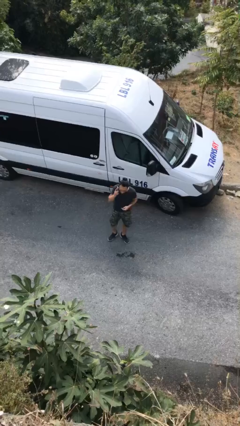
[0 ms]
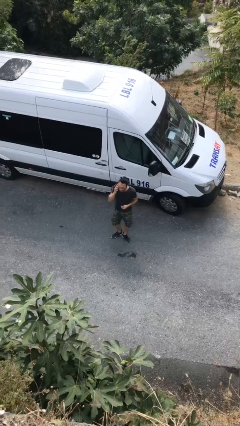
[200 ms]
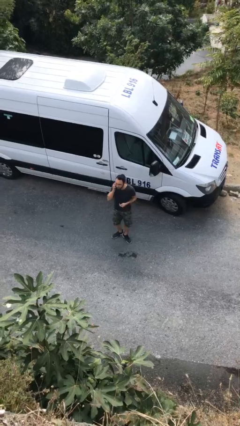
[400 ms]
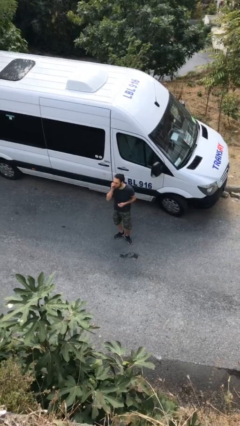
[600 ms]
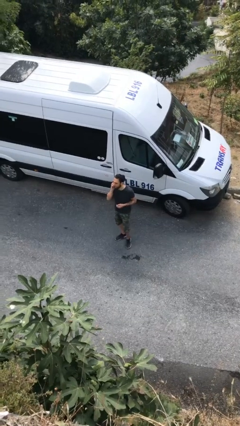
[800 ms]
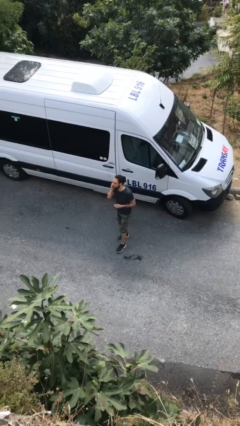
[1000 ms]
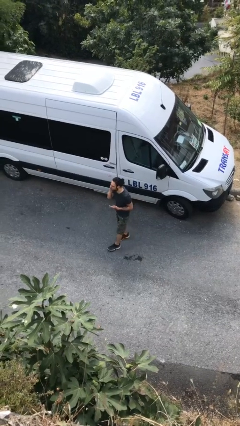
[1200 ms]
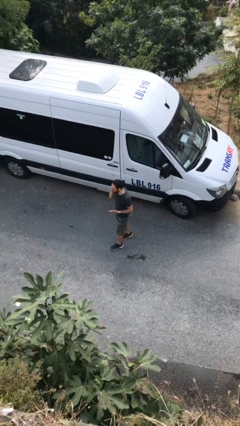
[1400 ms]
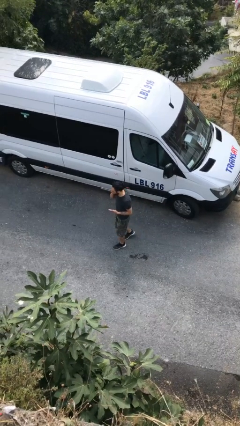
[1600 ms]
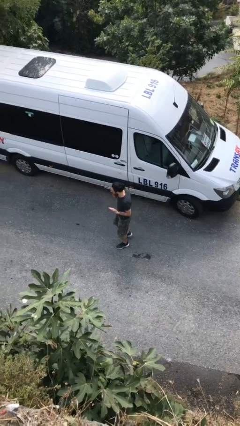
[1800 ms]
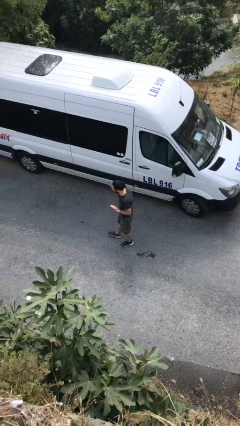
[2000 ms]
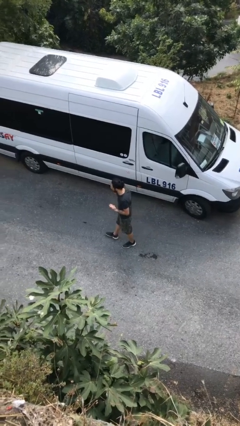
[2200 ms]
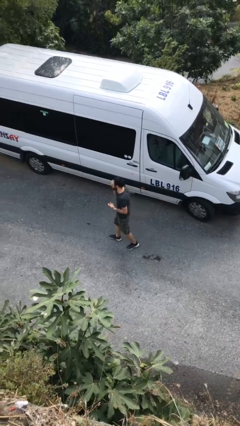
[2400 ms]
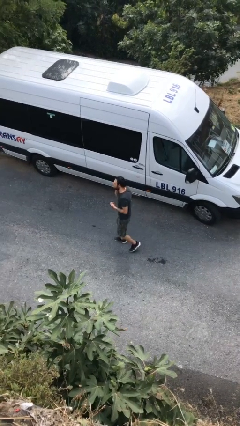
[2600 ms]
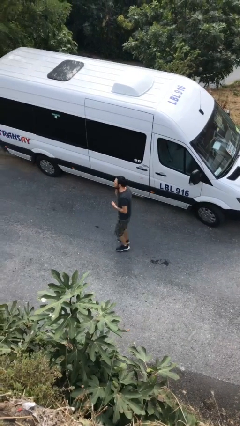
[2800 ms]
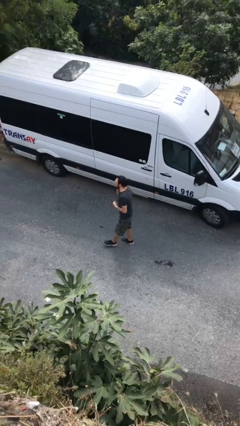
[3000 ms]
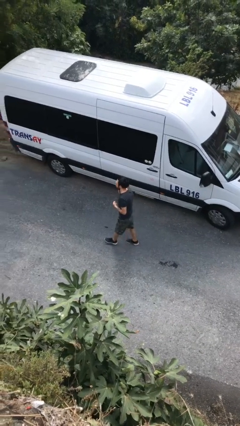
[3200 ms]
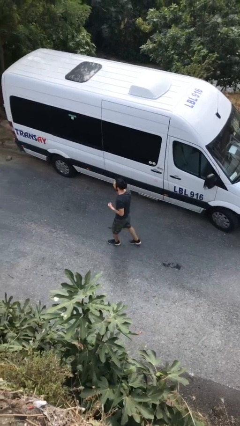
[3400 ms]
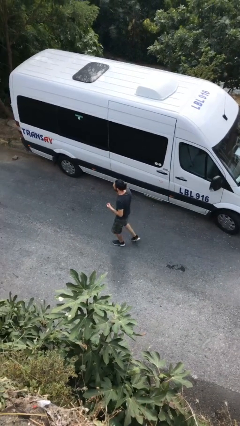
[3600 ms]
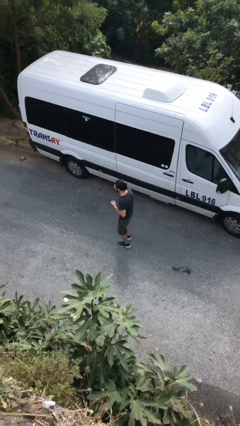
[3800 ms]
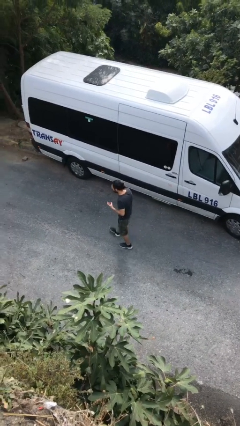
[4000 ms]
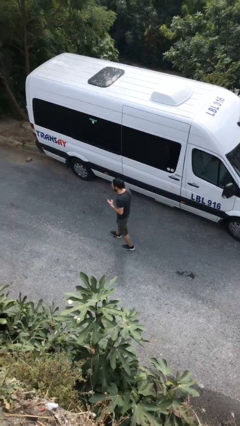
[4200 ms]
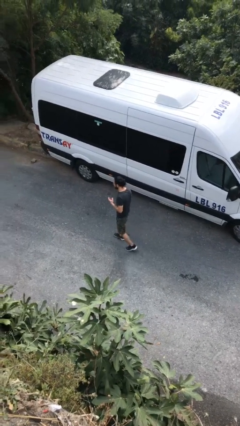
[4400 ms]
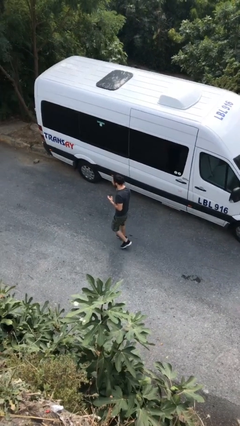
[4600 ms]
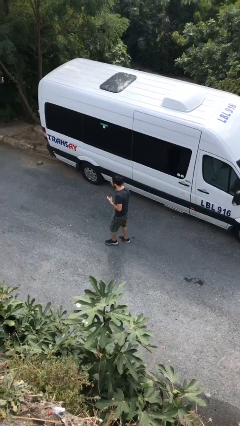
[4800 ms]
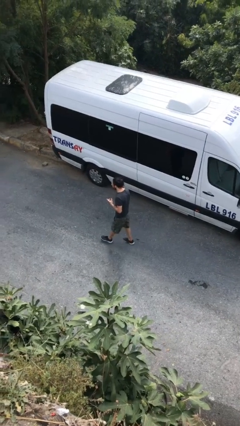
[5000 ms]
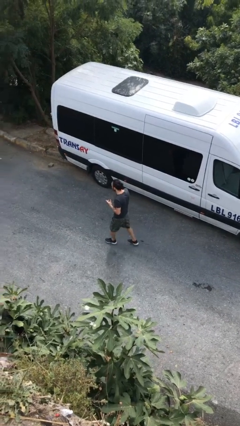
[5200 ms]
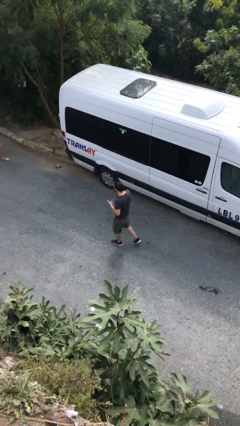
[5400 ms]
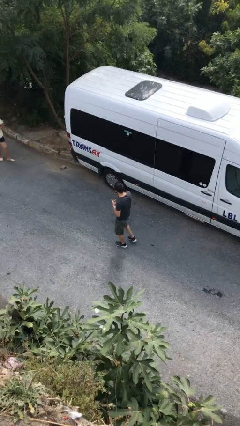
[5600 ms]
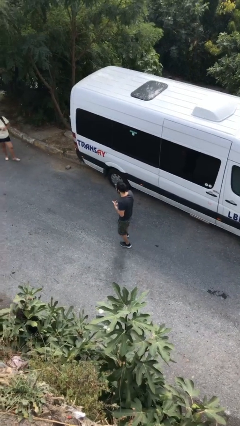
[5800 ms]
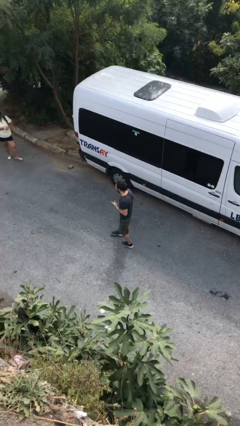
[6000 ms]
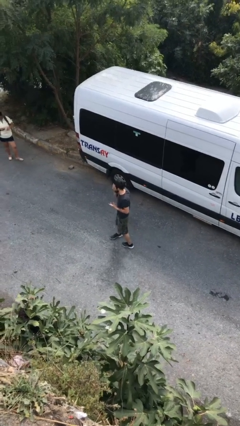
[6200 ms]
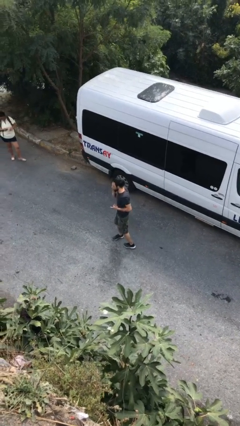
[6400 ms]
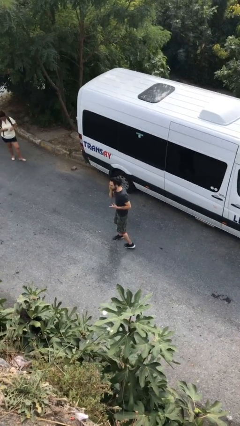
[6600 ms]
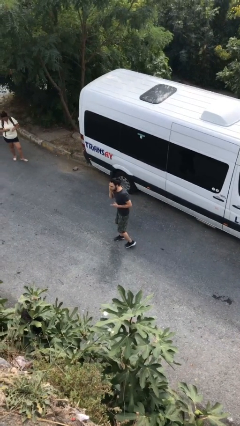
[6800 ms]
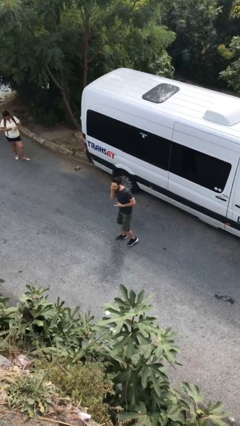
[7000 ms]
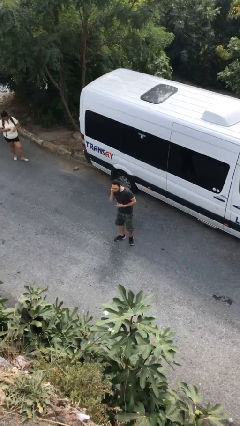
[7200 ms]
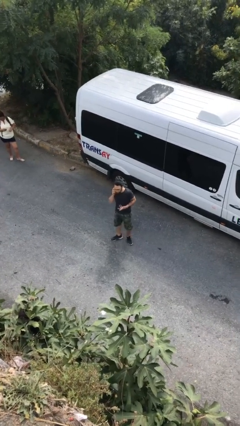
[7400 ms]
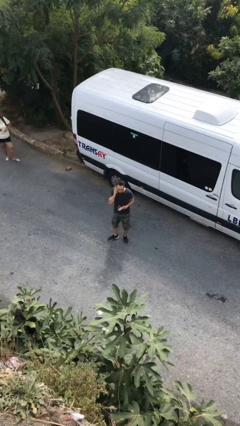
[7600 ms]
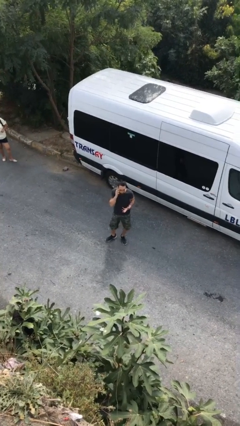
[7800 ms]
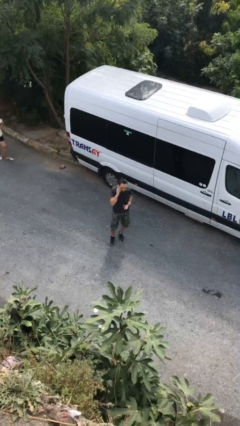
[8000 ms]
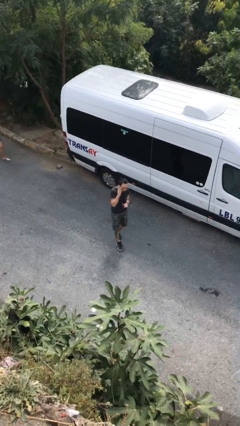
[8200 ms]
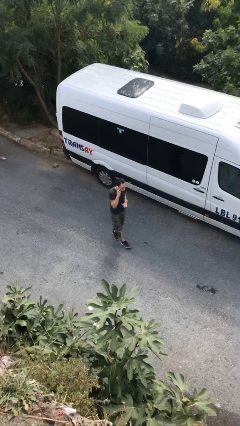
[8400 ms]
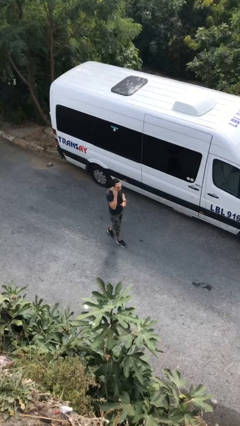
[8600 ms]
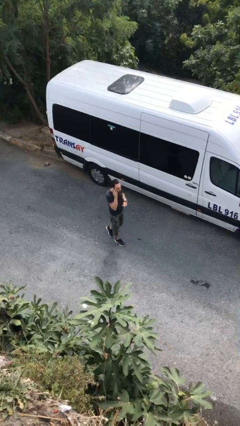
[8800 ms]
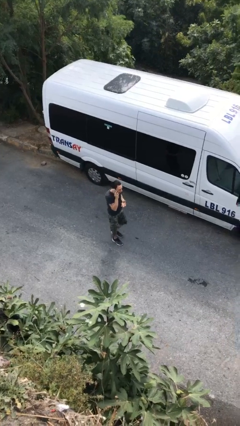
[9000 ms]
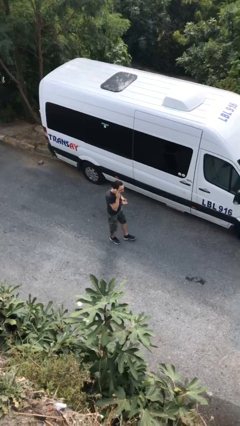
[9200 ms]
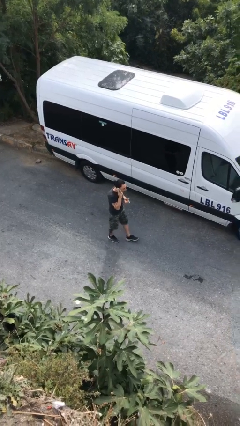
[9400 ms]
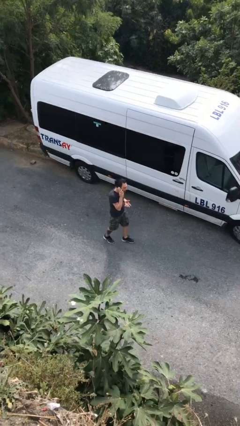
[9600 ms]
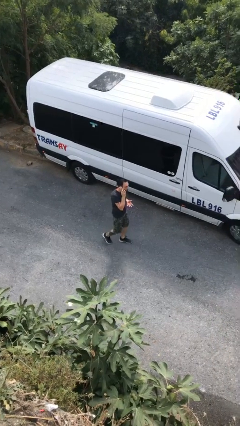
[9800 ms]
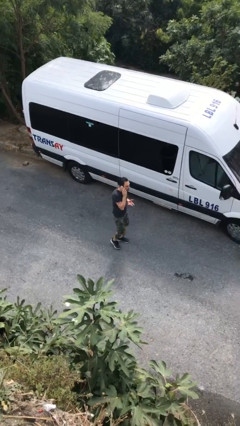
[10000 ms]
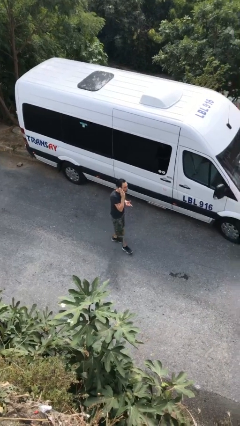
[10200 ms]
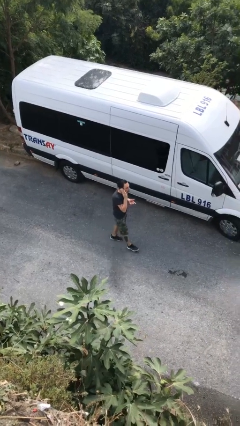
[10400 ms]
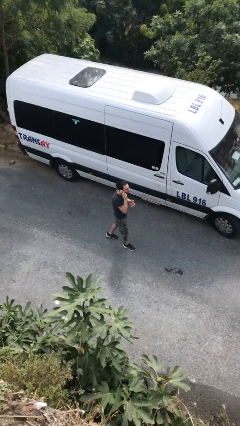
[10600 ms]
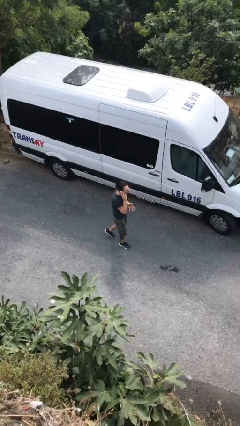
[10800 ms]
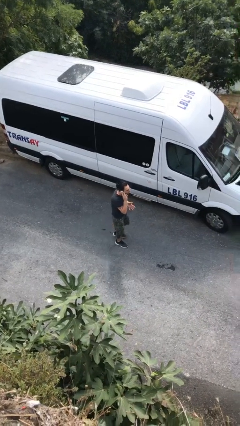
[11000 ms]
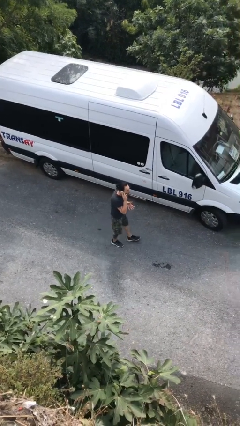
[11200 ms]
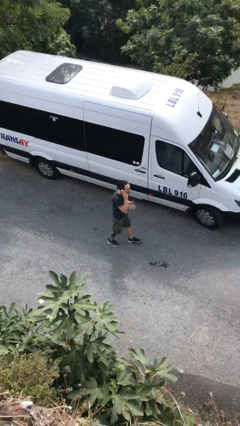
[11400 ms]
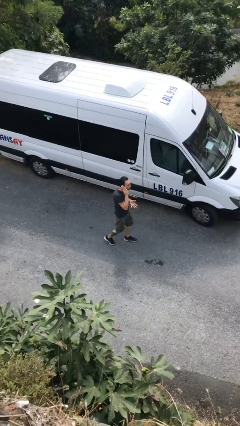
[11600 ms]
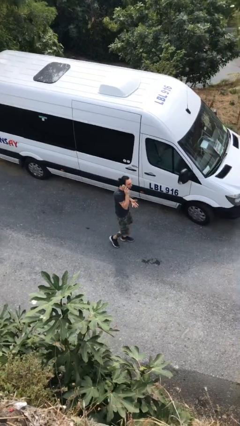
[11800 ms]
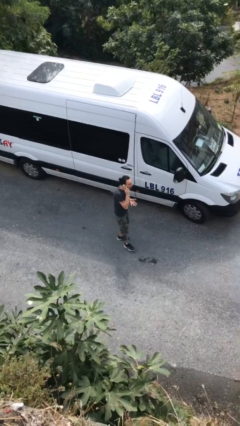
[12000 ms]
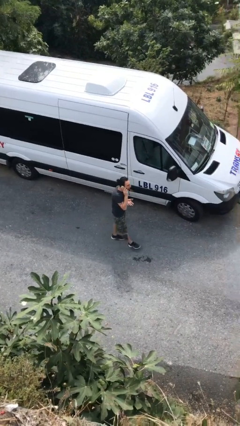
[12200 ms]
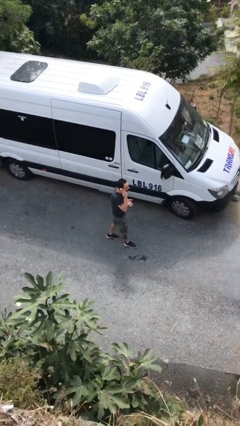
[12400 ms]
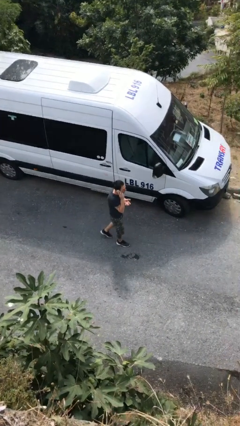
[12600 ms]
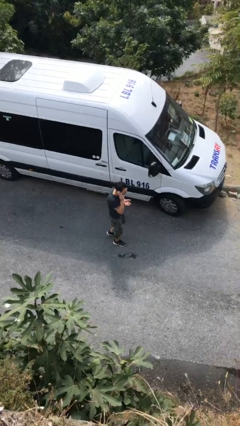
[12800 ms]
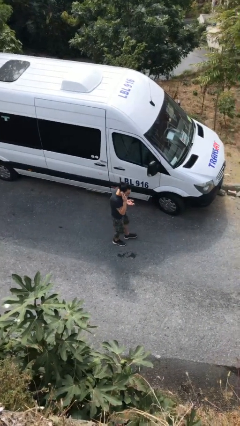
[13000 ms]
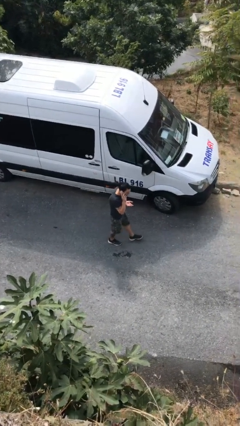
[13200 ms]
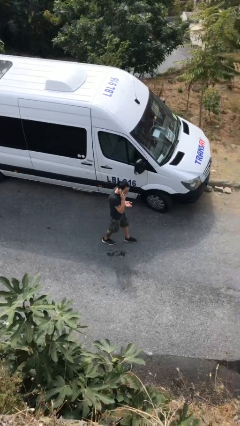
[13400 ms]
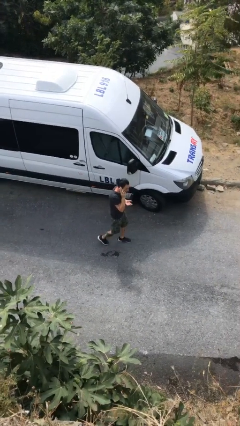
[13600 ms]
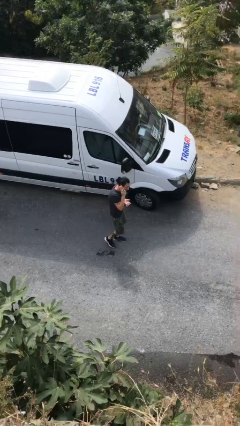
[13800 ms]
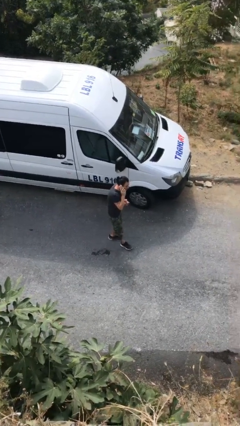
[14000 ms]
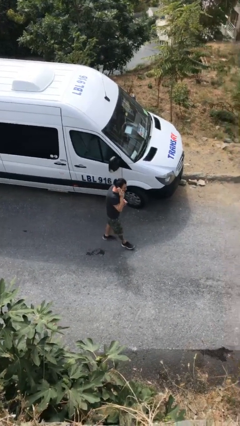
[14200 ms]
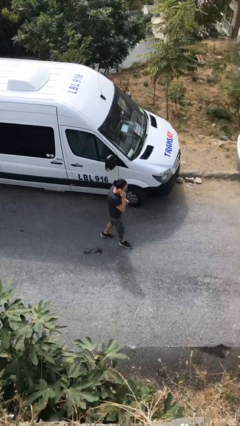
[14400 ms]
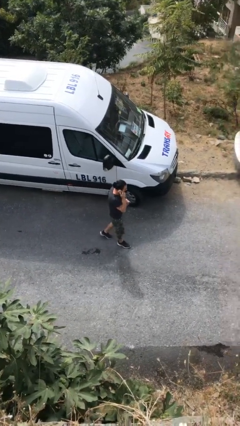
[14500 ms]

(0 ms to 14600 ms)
person talks on phone

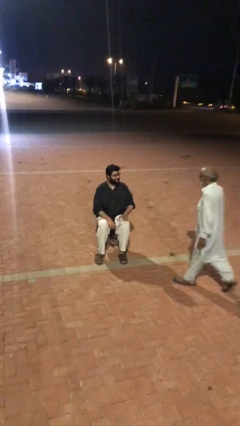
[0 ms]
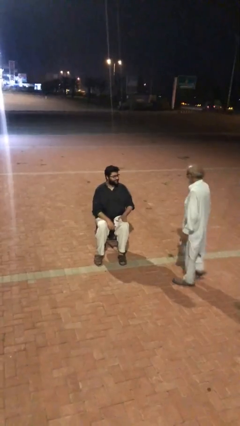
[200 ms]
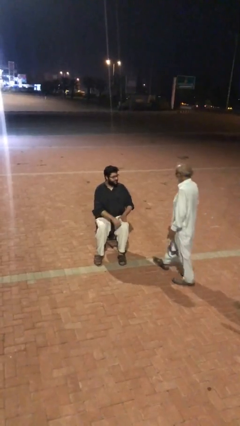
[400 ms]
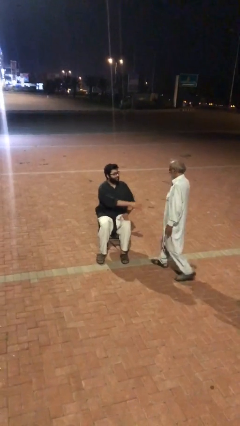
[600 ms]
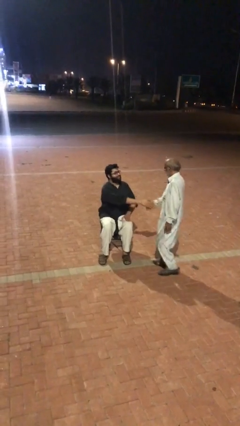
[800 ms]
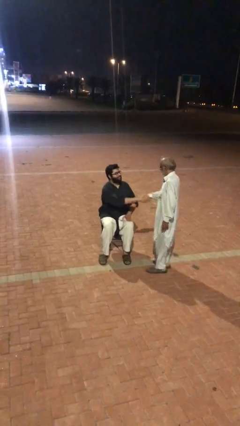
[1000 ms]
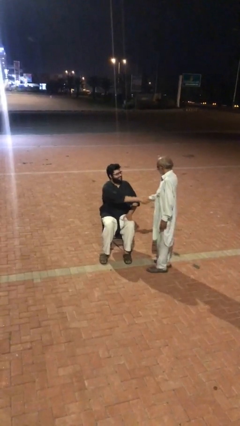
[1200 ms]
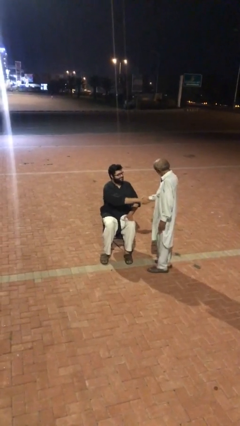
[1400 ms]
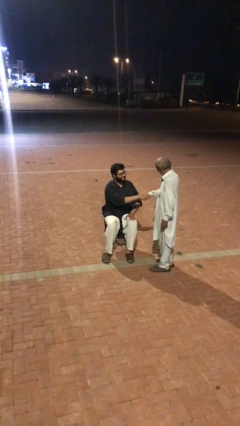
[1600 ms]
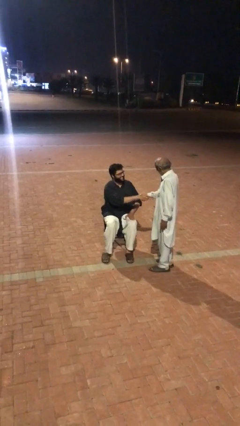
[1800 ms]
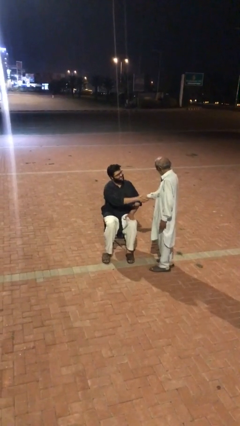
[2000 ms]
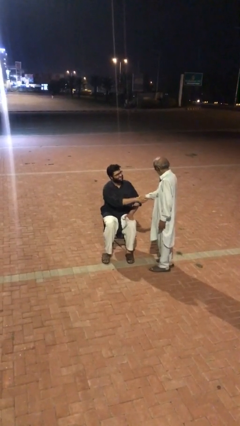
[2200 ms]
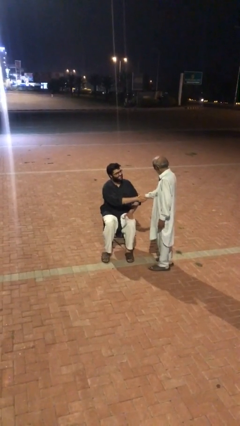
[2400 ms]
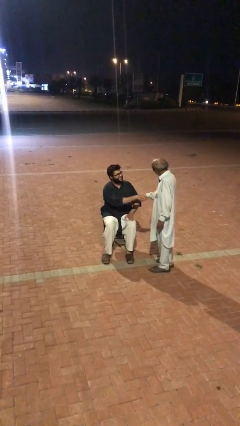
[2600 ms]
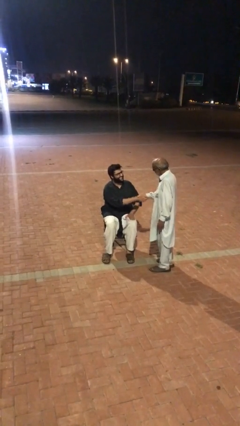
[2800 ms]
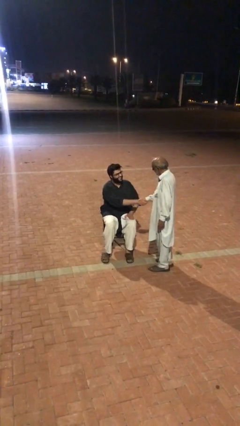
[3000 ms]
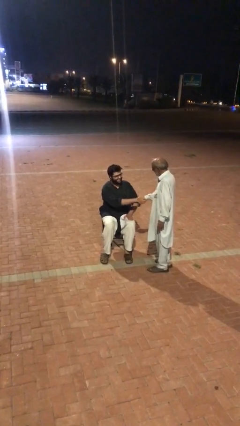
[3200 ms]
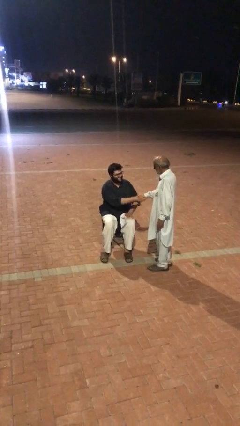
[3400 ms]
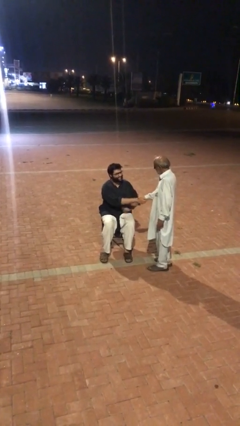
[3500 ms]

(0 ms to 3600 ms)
person shakes hand
